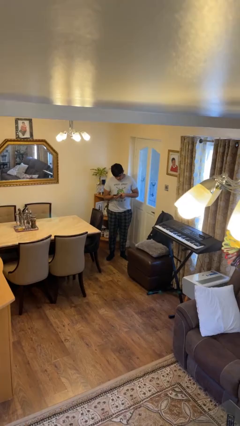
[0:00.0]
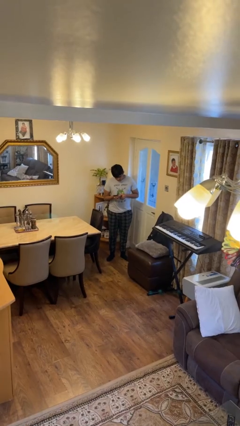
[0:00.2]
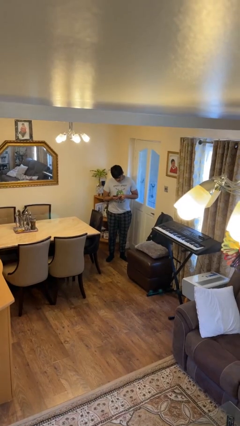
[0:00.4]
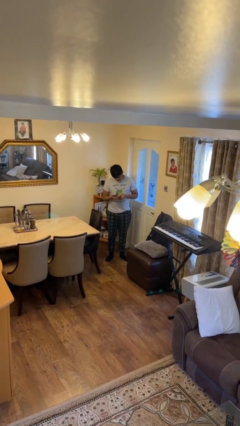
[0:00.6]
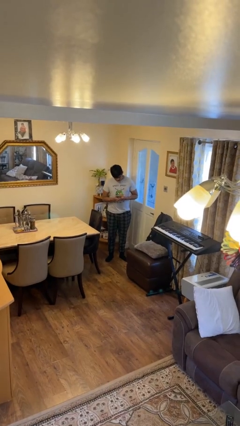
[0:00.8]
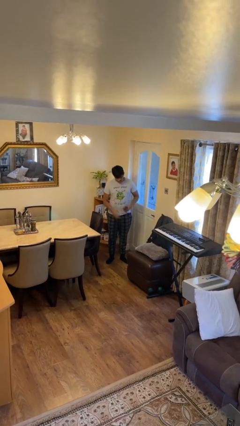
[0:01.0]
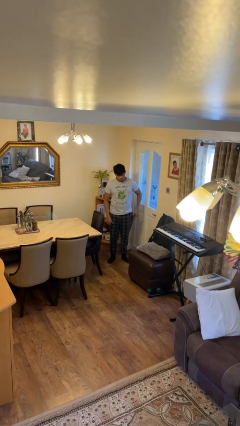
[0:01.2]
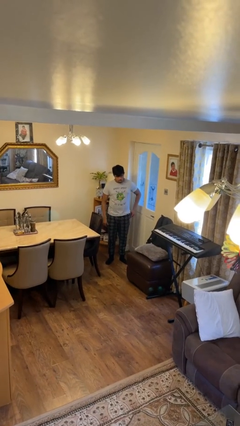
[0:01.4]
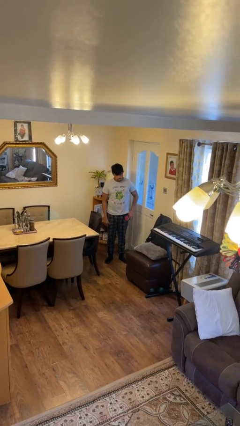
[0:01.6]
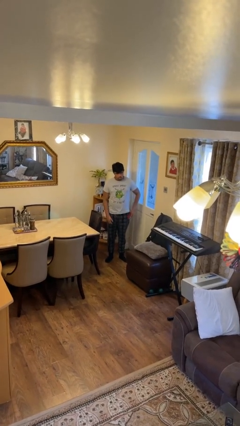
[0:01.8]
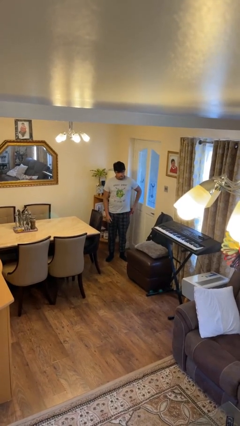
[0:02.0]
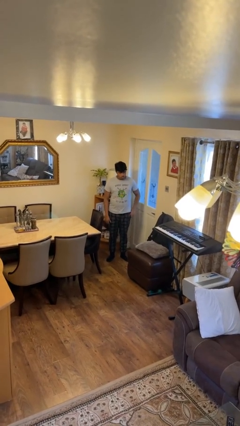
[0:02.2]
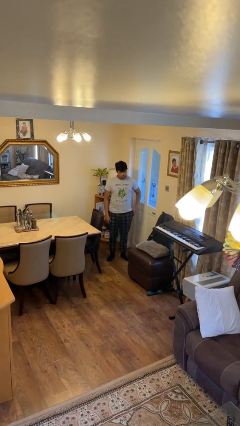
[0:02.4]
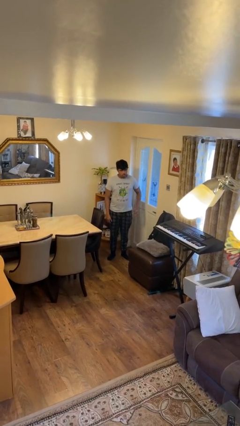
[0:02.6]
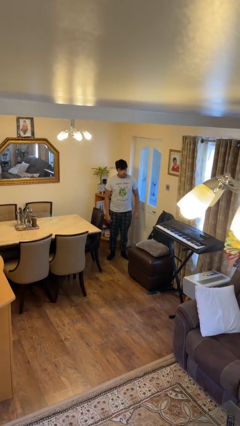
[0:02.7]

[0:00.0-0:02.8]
person puts phone into pocket

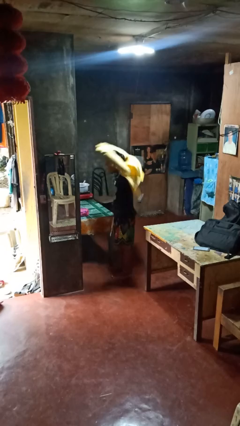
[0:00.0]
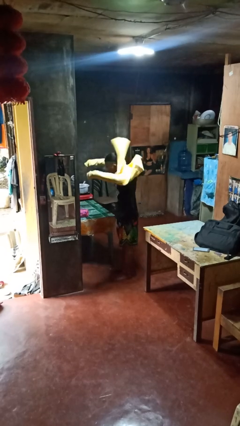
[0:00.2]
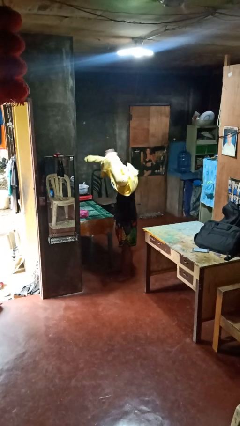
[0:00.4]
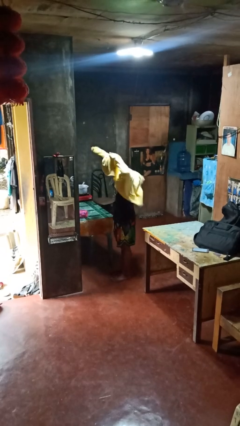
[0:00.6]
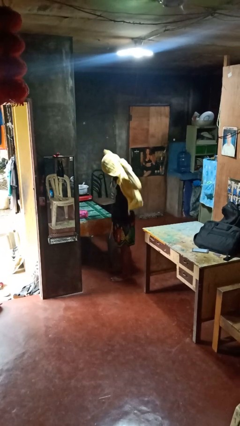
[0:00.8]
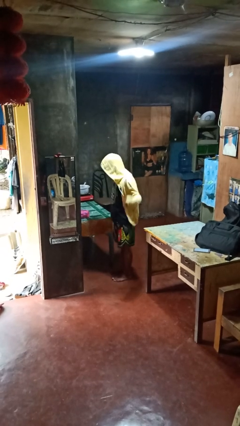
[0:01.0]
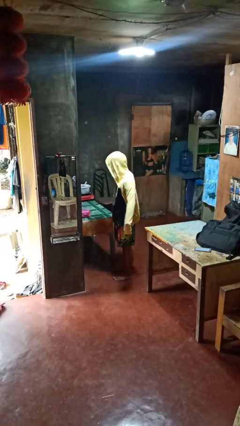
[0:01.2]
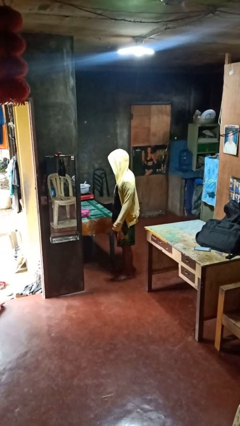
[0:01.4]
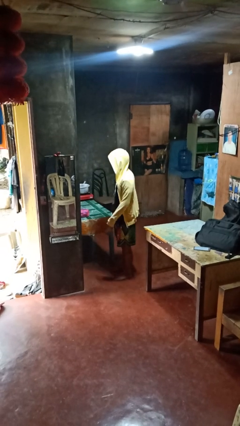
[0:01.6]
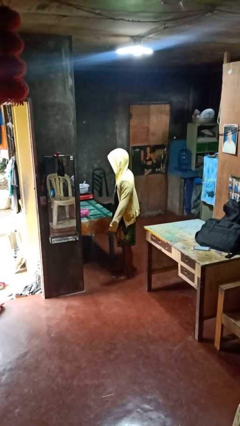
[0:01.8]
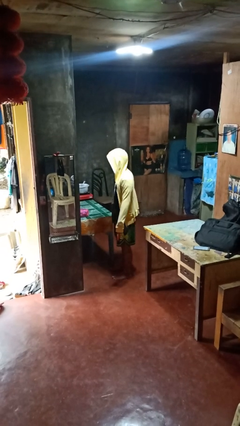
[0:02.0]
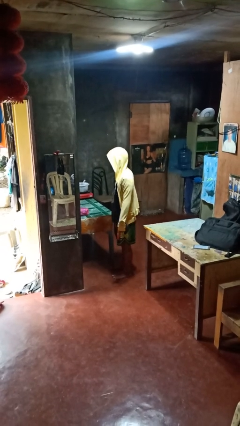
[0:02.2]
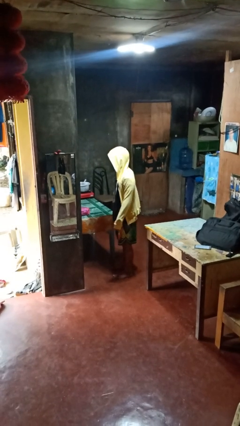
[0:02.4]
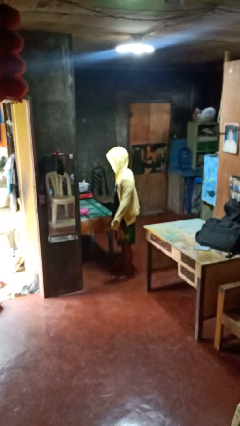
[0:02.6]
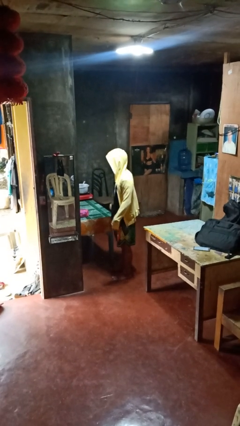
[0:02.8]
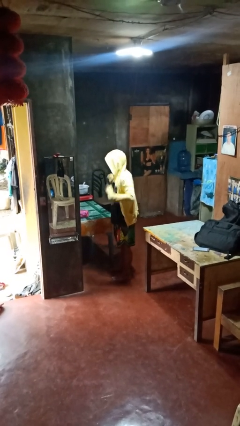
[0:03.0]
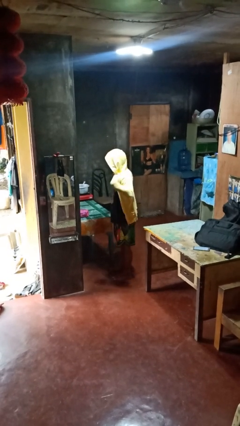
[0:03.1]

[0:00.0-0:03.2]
person puts on hoodie

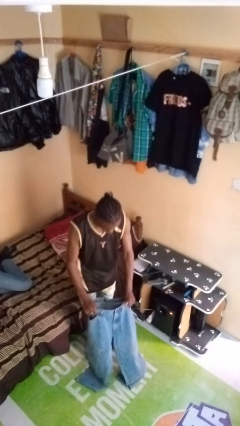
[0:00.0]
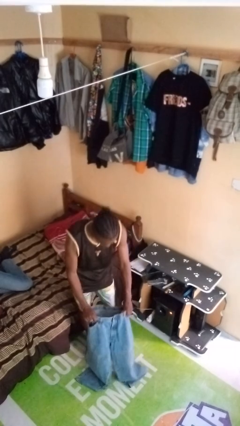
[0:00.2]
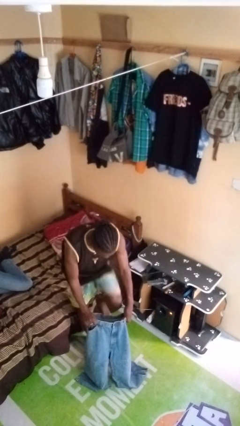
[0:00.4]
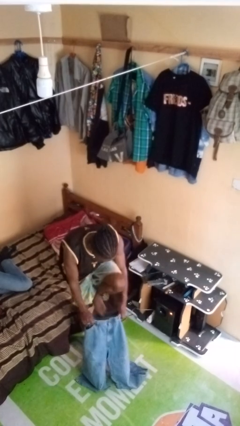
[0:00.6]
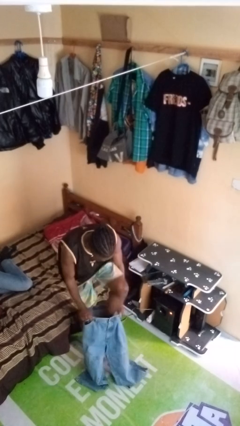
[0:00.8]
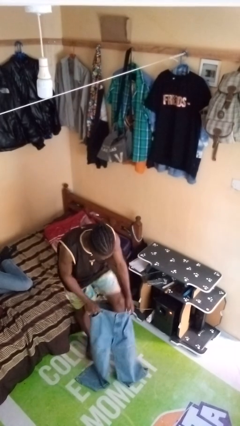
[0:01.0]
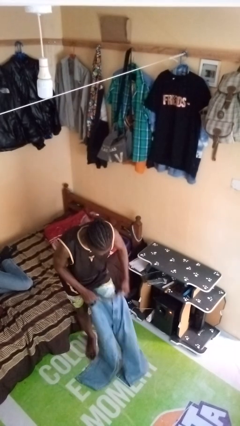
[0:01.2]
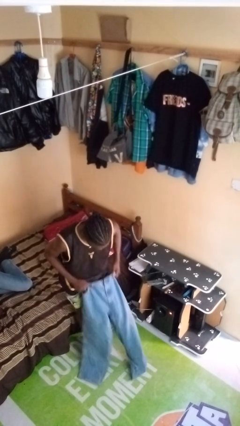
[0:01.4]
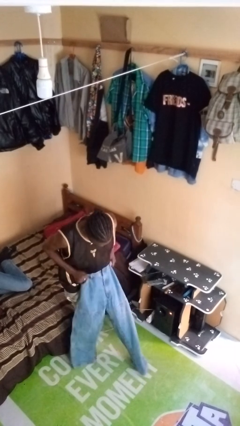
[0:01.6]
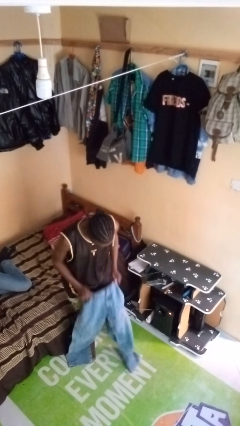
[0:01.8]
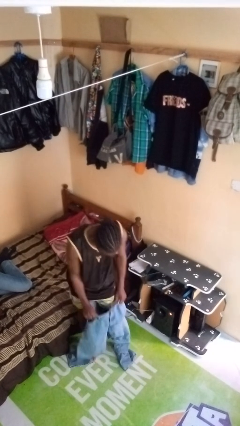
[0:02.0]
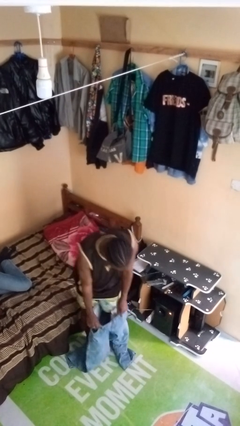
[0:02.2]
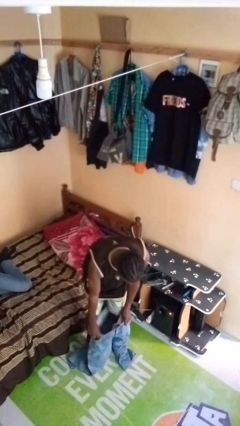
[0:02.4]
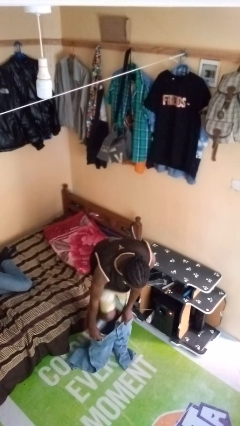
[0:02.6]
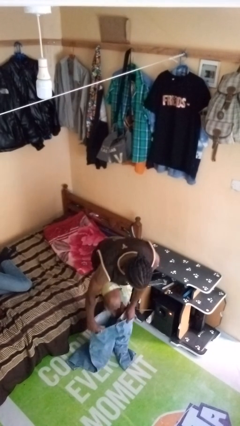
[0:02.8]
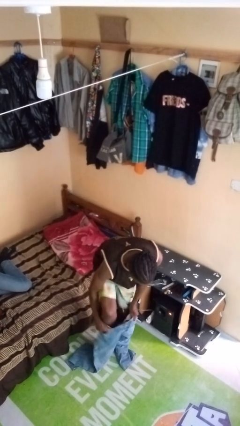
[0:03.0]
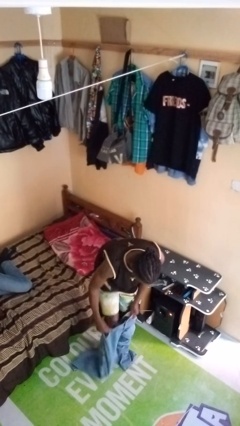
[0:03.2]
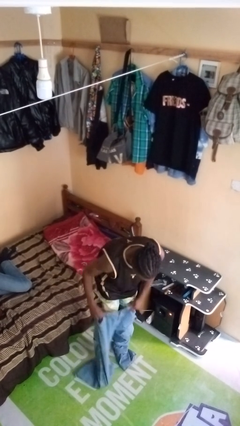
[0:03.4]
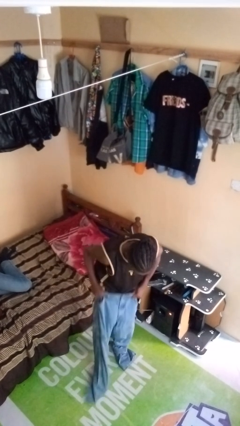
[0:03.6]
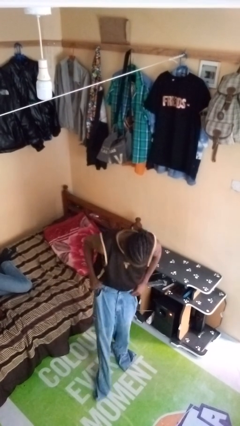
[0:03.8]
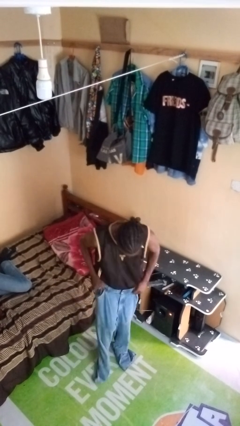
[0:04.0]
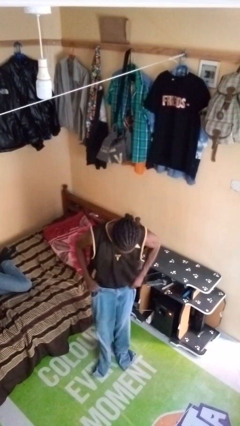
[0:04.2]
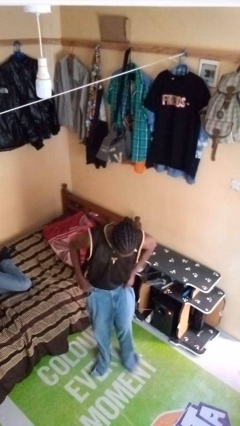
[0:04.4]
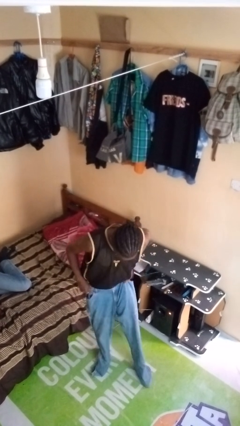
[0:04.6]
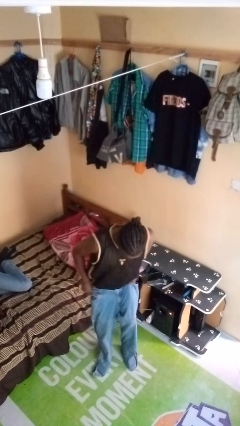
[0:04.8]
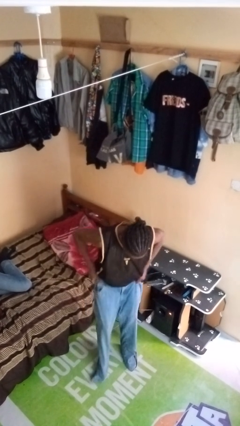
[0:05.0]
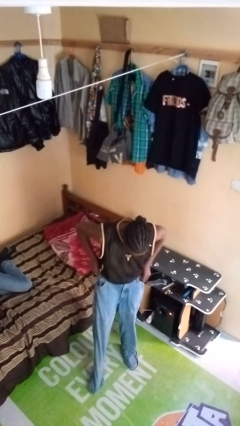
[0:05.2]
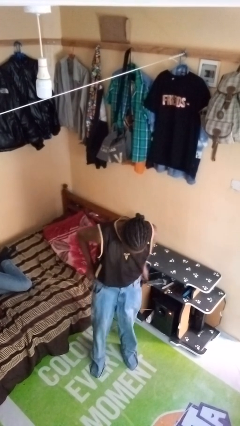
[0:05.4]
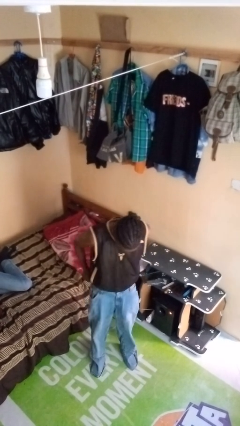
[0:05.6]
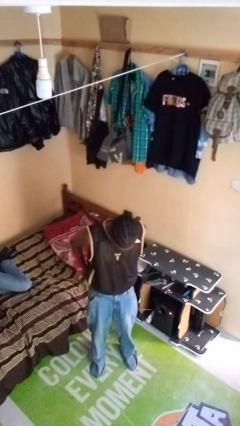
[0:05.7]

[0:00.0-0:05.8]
person puts on pants

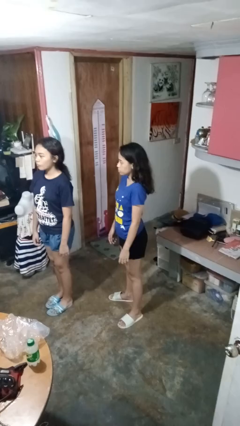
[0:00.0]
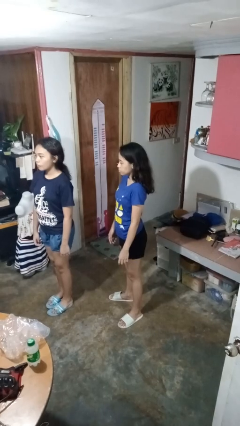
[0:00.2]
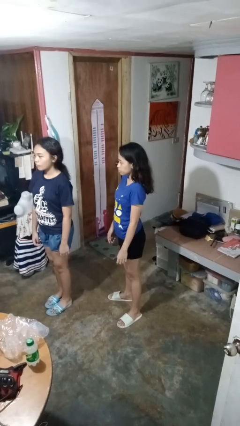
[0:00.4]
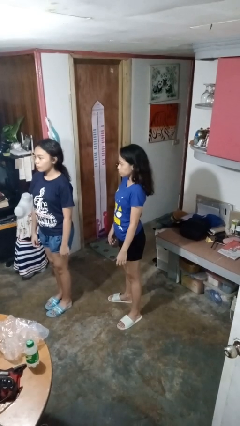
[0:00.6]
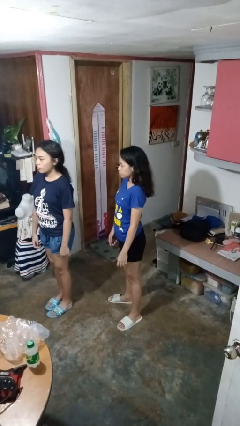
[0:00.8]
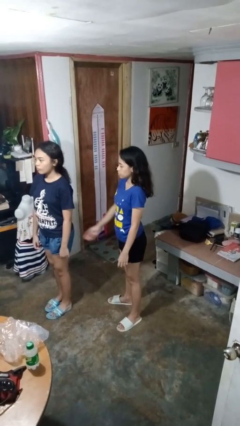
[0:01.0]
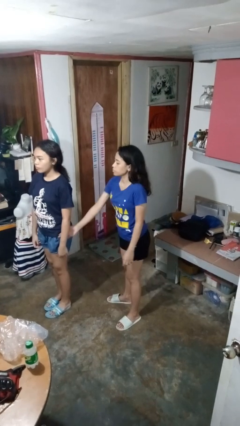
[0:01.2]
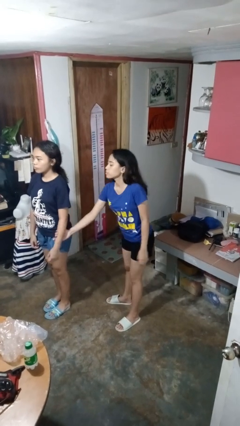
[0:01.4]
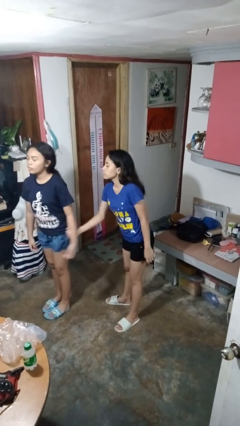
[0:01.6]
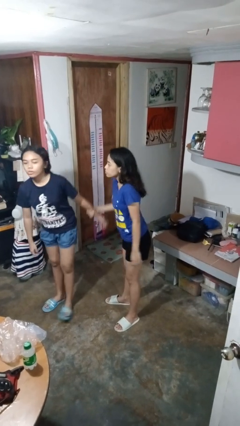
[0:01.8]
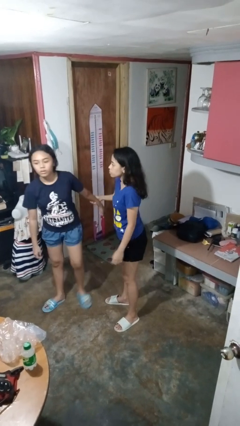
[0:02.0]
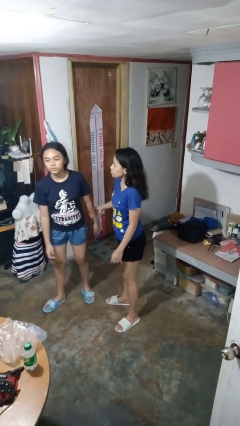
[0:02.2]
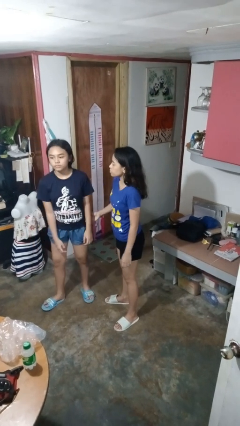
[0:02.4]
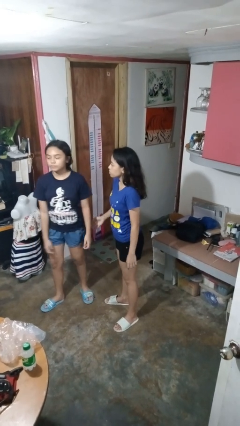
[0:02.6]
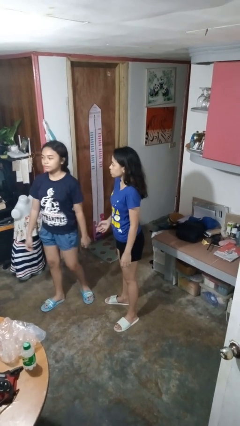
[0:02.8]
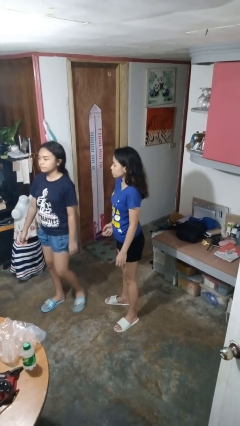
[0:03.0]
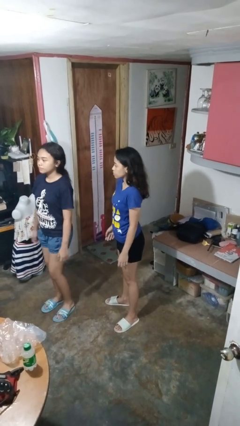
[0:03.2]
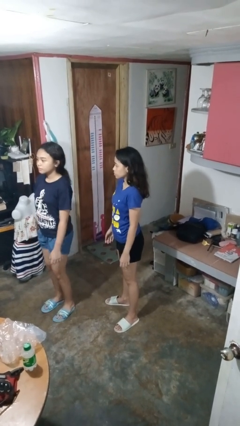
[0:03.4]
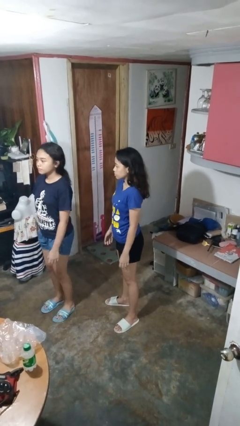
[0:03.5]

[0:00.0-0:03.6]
person grabs person by forearm

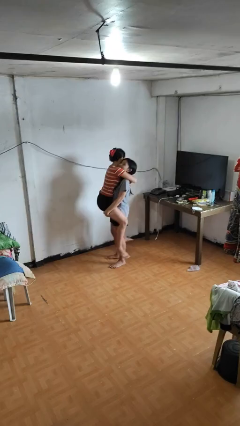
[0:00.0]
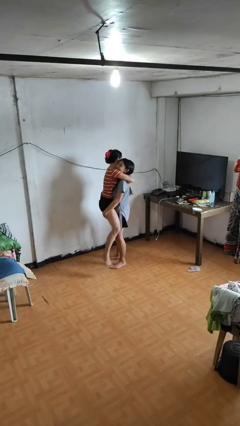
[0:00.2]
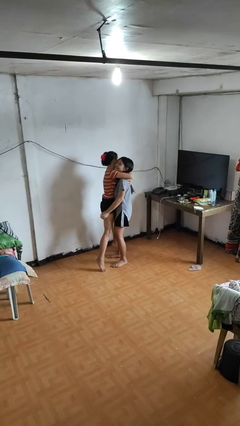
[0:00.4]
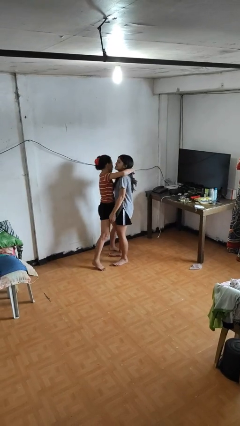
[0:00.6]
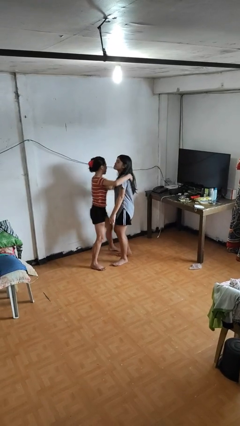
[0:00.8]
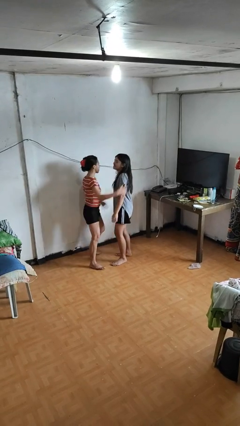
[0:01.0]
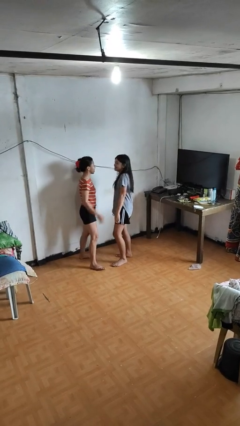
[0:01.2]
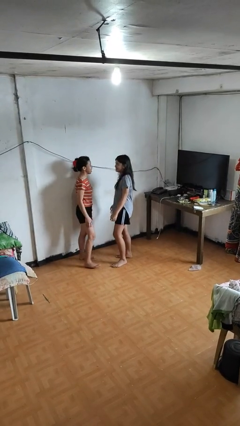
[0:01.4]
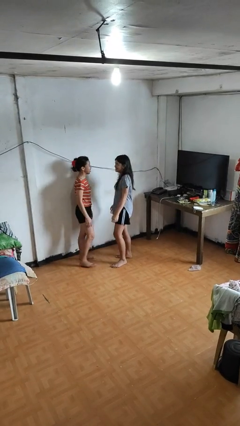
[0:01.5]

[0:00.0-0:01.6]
person puts down person

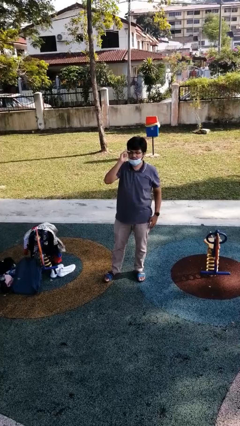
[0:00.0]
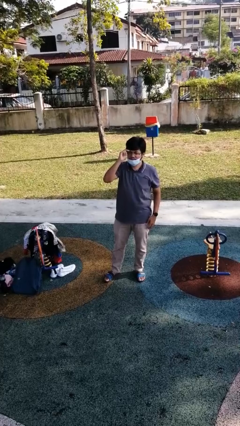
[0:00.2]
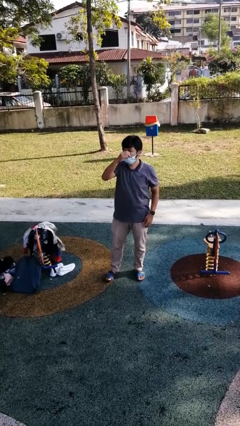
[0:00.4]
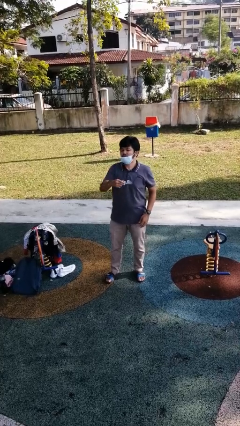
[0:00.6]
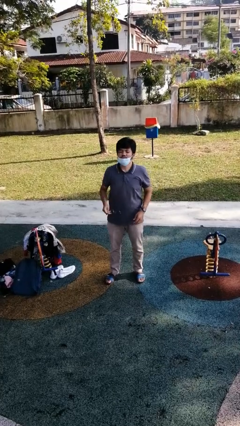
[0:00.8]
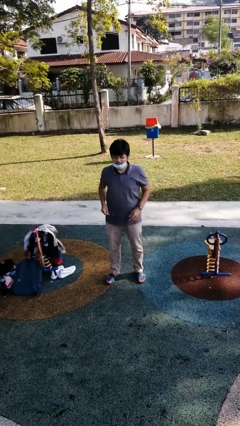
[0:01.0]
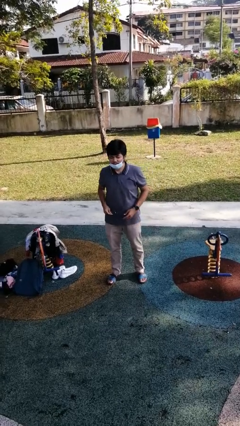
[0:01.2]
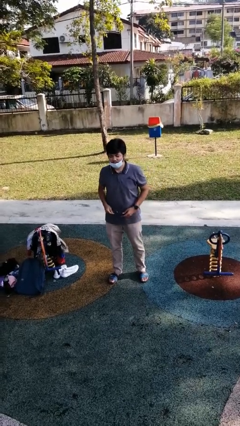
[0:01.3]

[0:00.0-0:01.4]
person takes off glasses
